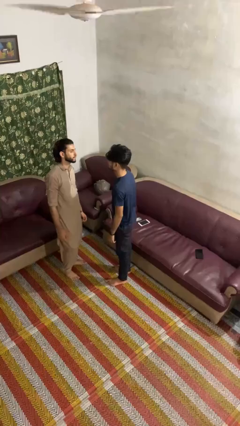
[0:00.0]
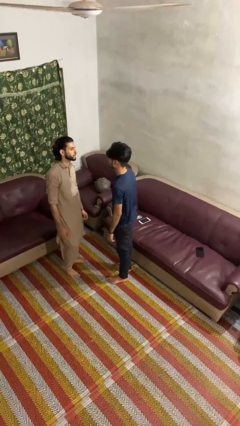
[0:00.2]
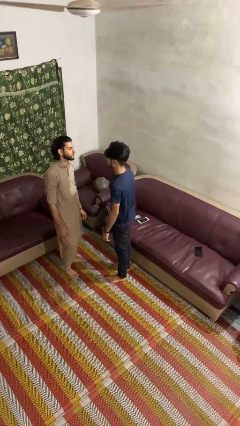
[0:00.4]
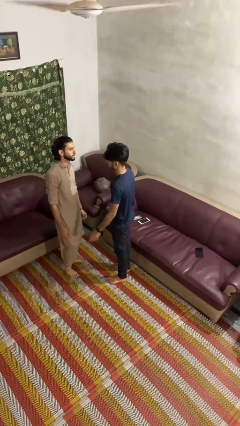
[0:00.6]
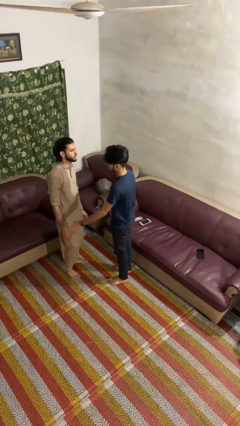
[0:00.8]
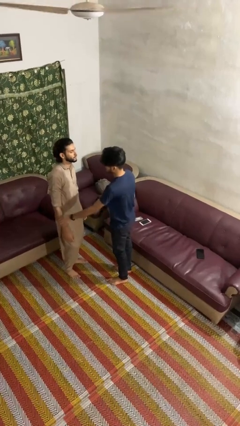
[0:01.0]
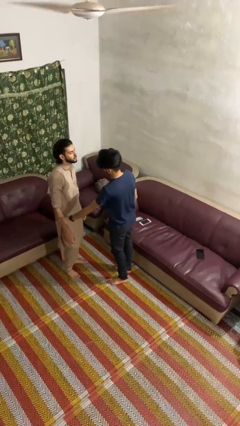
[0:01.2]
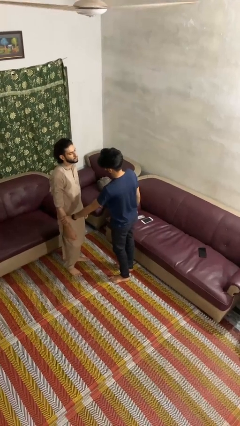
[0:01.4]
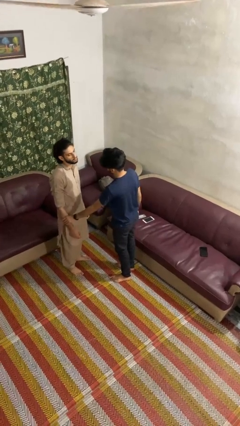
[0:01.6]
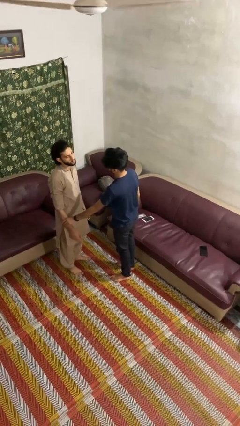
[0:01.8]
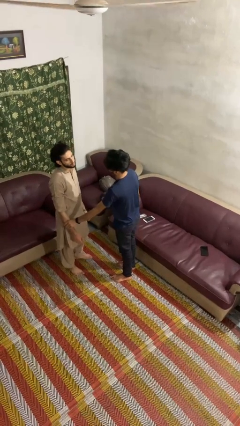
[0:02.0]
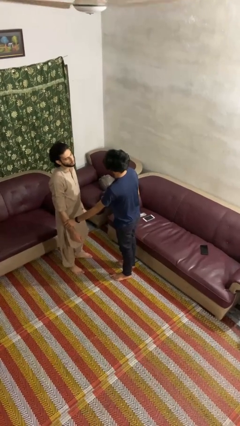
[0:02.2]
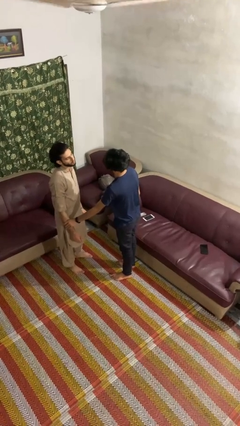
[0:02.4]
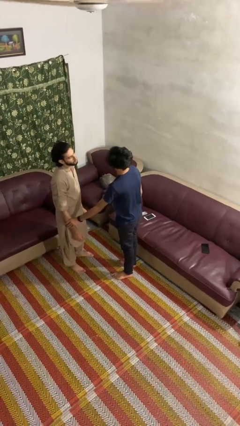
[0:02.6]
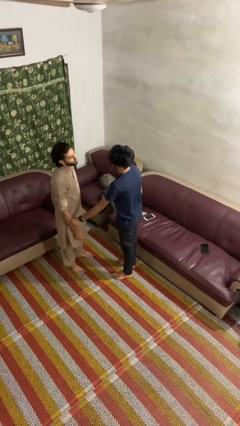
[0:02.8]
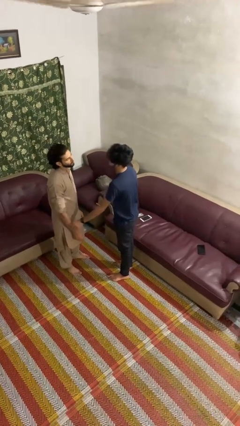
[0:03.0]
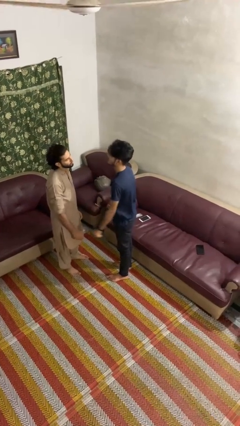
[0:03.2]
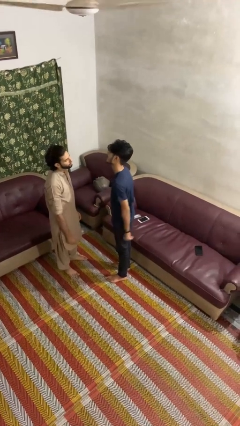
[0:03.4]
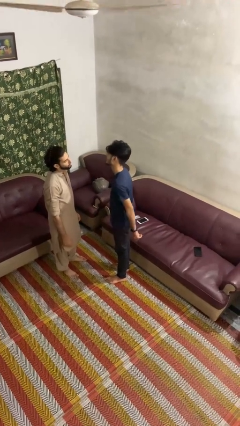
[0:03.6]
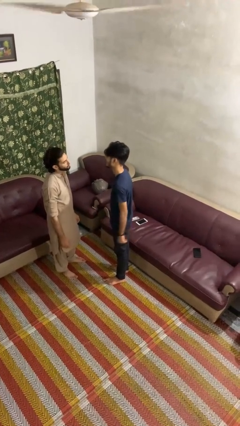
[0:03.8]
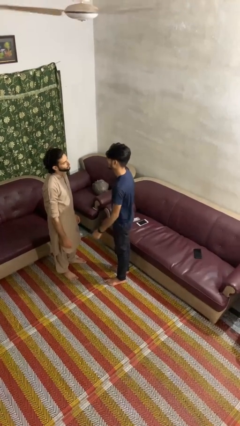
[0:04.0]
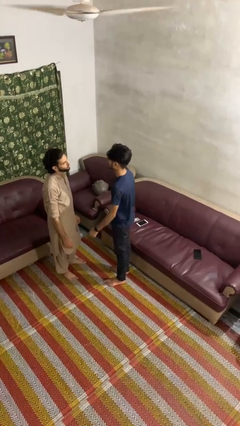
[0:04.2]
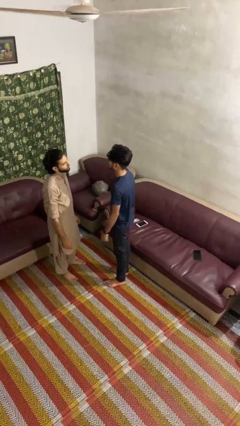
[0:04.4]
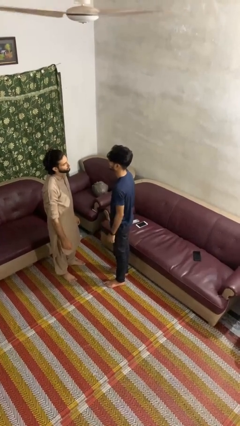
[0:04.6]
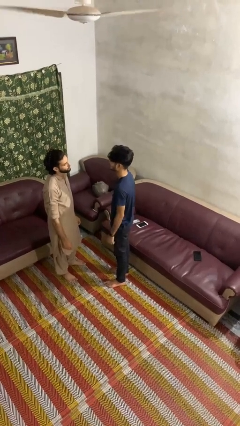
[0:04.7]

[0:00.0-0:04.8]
person grabs person by forearm

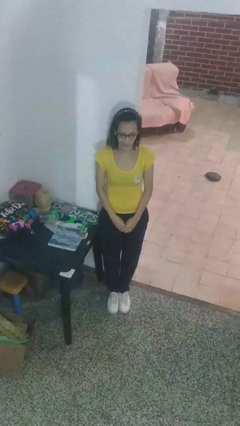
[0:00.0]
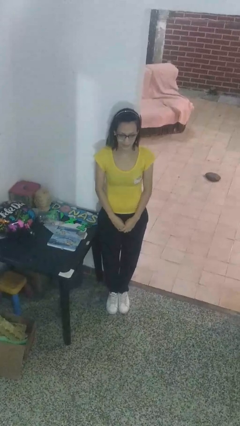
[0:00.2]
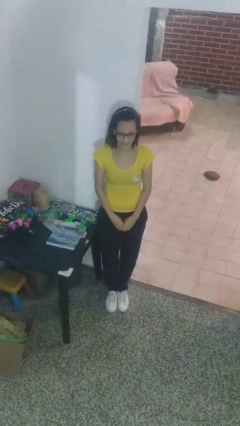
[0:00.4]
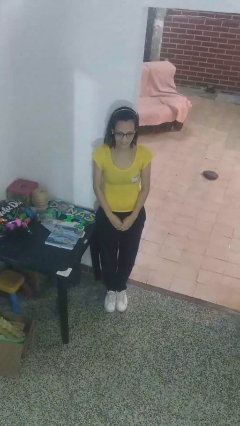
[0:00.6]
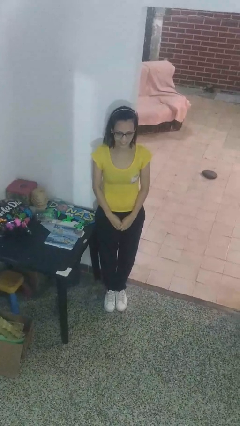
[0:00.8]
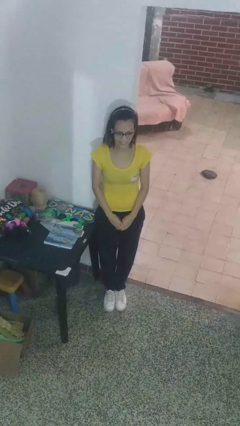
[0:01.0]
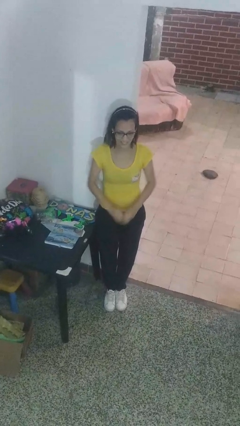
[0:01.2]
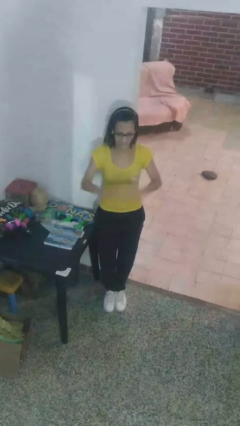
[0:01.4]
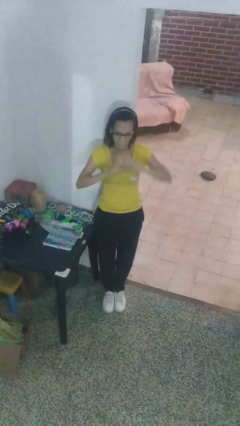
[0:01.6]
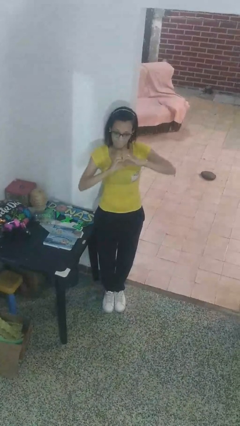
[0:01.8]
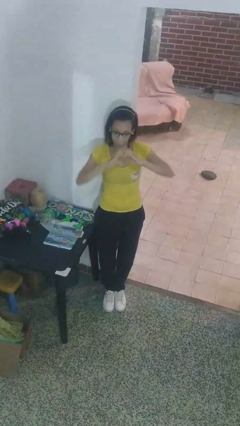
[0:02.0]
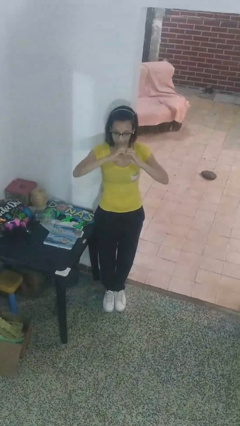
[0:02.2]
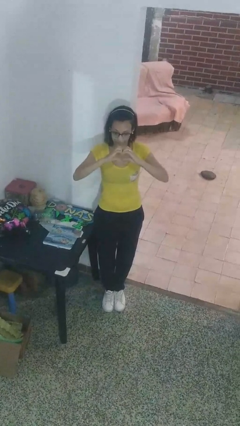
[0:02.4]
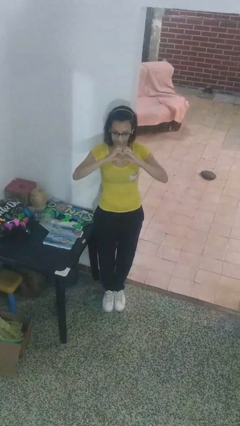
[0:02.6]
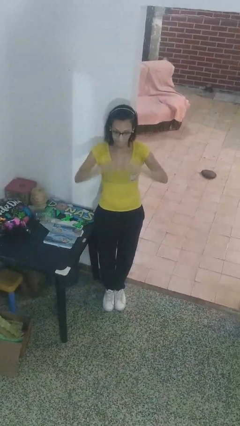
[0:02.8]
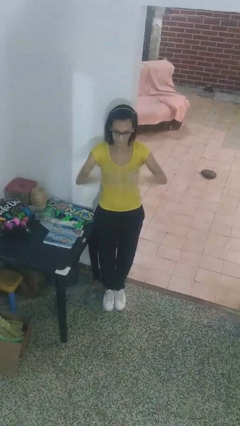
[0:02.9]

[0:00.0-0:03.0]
person gestures heart

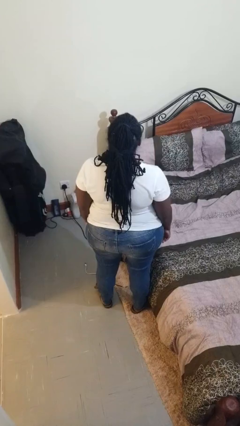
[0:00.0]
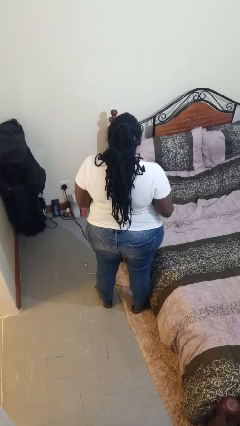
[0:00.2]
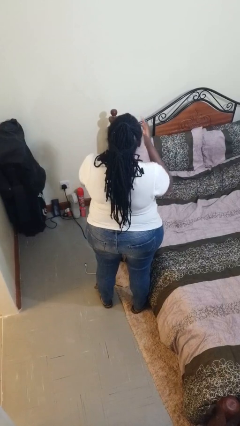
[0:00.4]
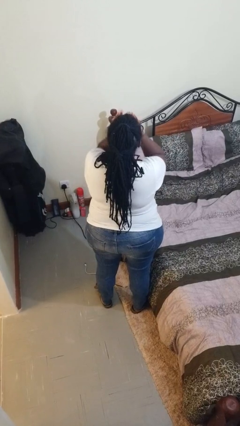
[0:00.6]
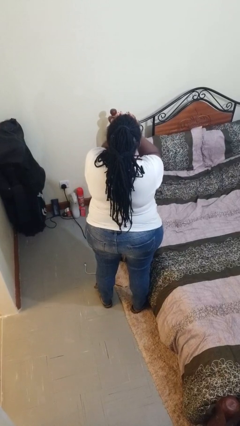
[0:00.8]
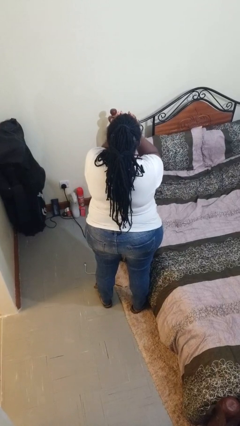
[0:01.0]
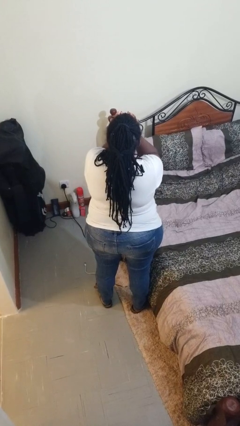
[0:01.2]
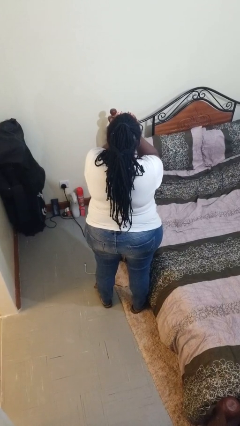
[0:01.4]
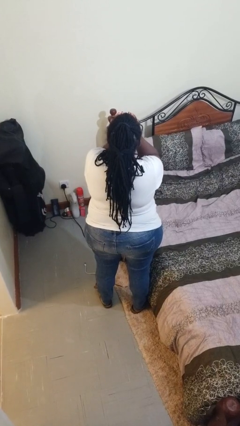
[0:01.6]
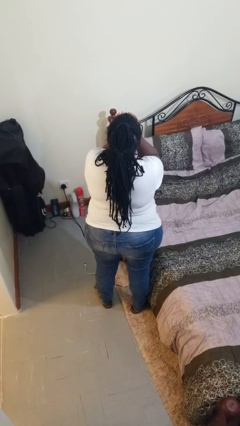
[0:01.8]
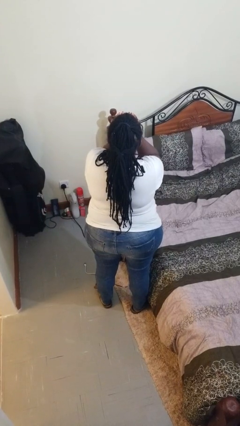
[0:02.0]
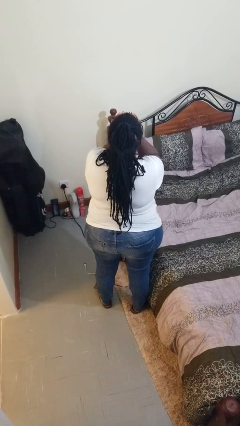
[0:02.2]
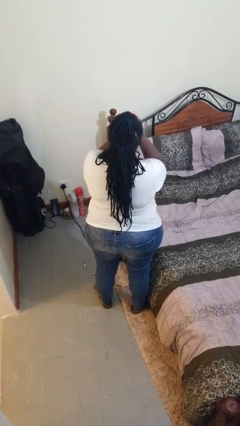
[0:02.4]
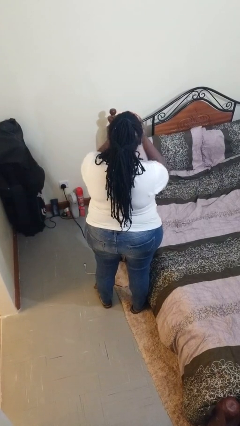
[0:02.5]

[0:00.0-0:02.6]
person covers face with hands

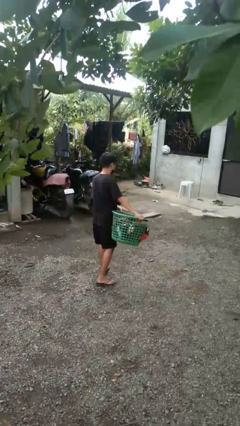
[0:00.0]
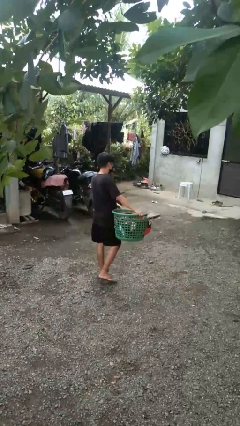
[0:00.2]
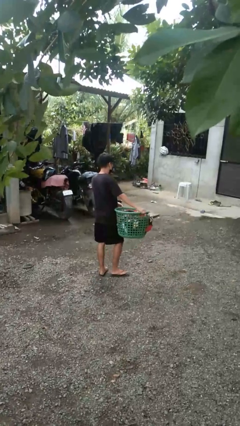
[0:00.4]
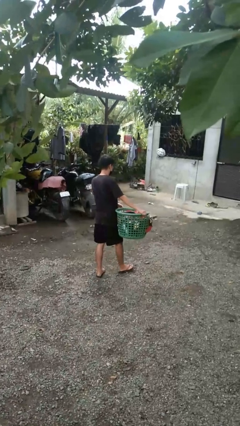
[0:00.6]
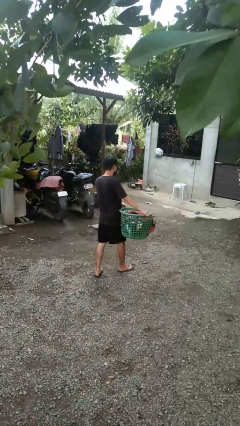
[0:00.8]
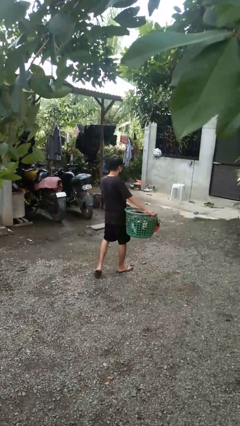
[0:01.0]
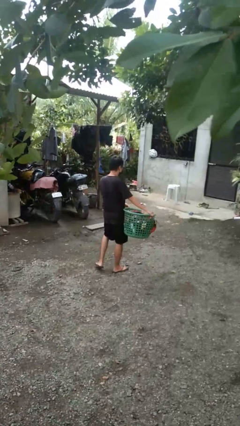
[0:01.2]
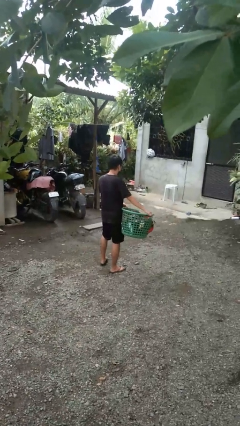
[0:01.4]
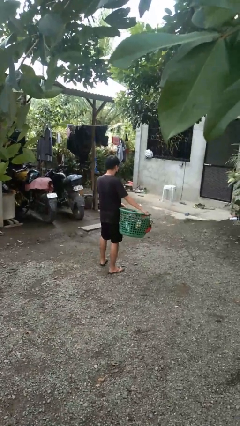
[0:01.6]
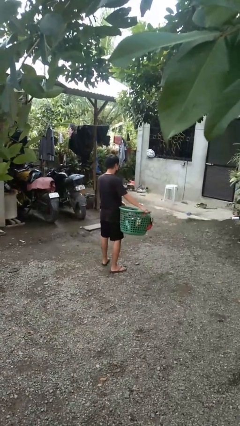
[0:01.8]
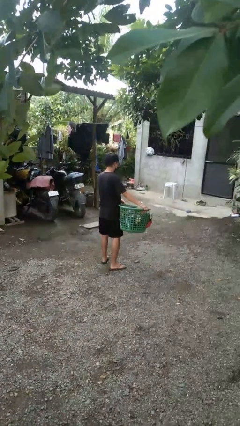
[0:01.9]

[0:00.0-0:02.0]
person carries laundry basket

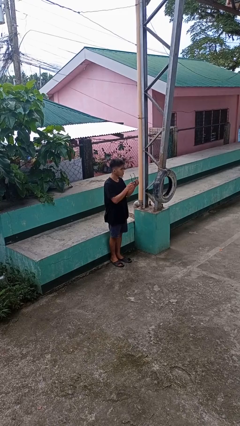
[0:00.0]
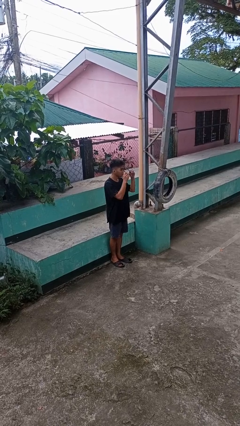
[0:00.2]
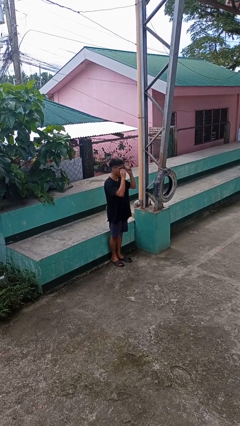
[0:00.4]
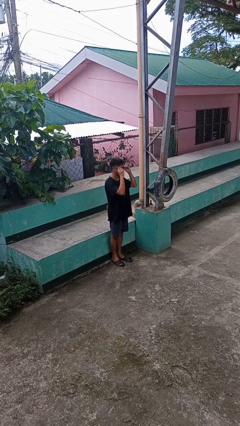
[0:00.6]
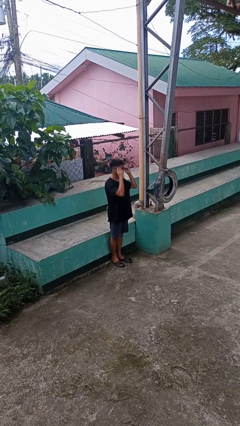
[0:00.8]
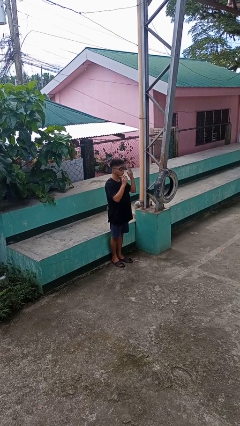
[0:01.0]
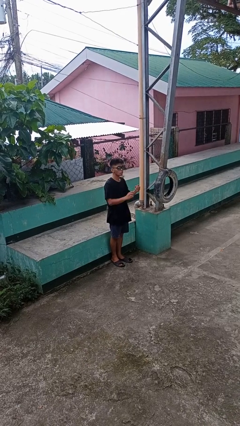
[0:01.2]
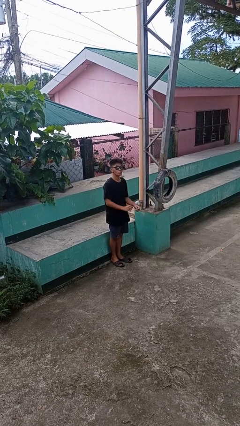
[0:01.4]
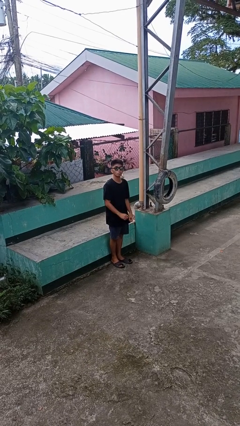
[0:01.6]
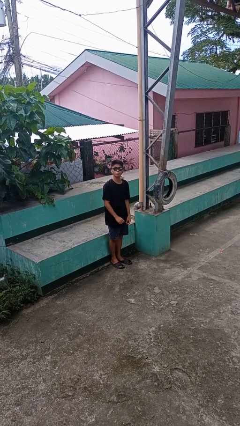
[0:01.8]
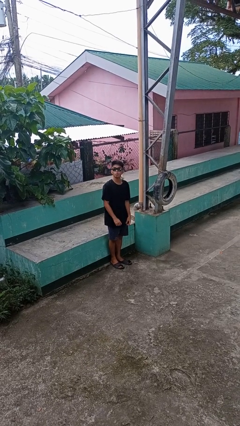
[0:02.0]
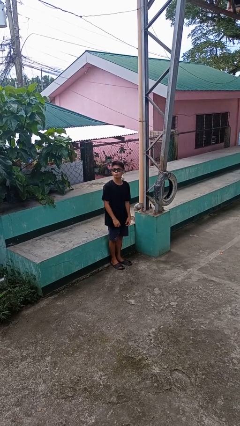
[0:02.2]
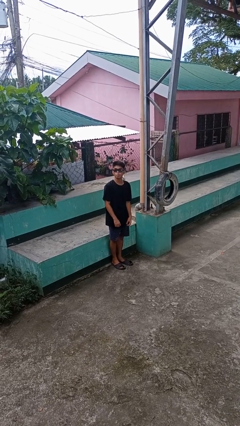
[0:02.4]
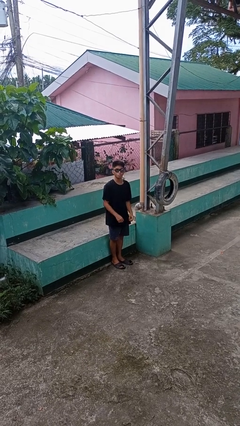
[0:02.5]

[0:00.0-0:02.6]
person puts on sunglasses

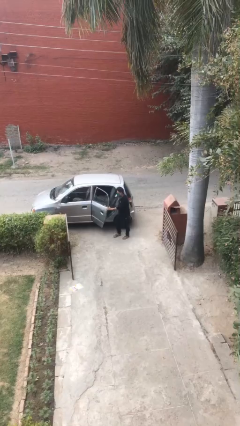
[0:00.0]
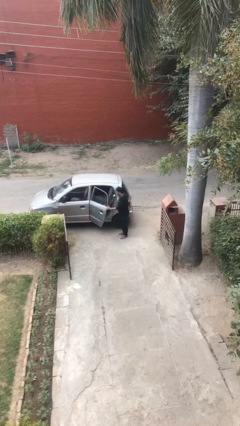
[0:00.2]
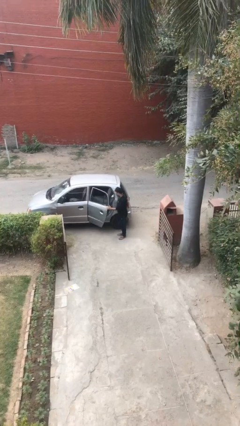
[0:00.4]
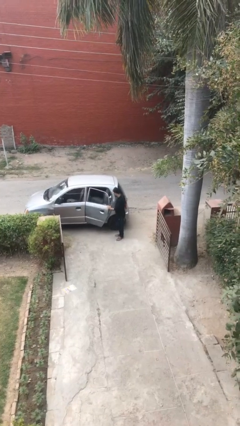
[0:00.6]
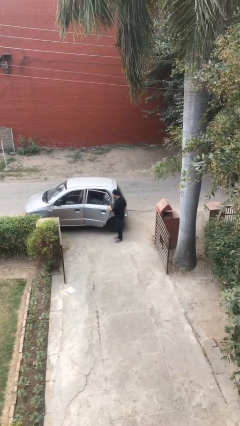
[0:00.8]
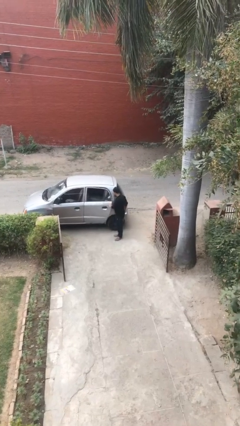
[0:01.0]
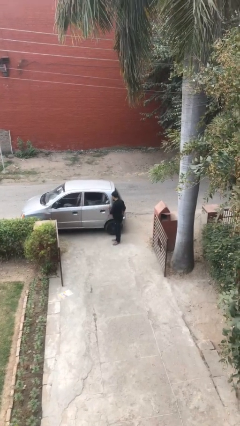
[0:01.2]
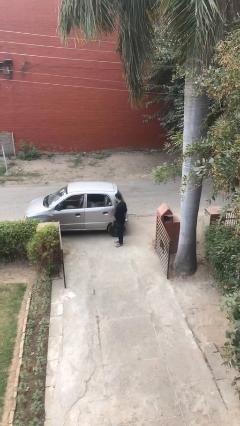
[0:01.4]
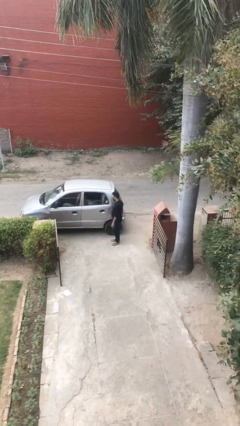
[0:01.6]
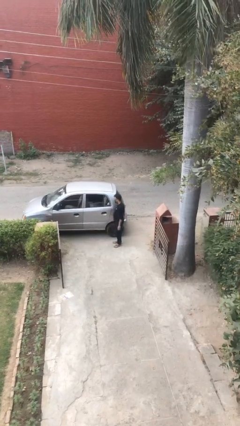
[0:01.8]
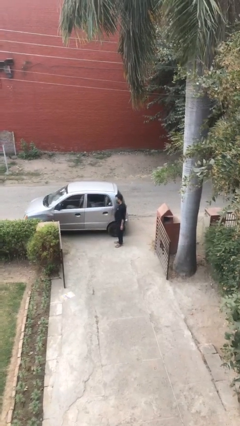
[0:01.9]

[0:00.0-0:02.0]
person closes car door

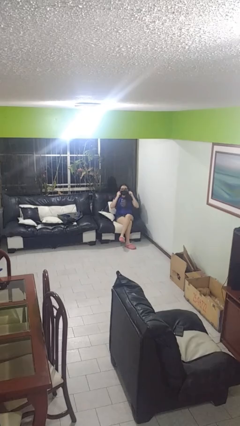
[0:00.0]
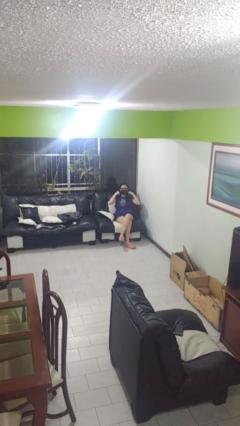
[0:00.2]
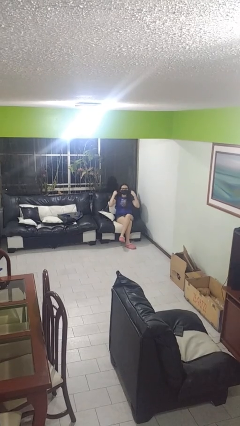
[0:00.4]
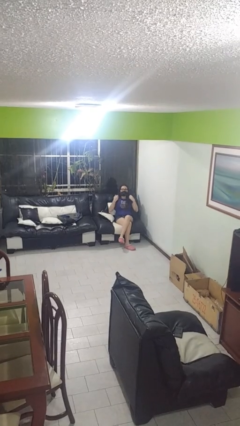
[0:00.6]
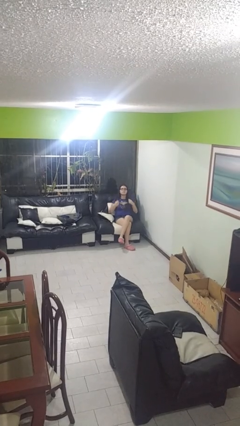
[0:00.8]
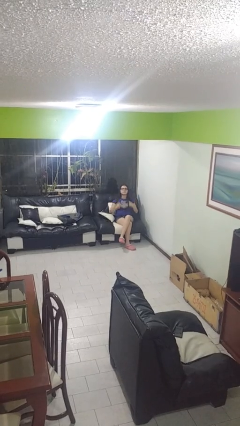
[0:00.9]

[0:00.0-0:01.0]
person takes off facemask
